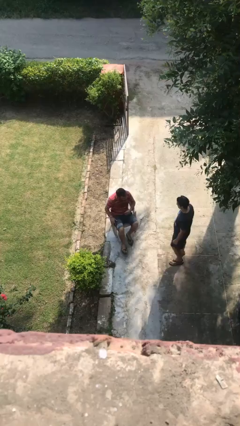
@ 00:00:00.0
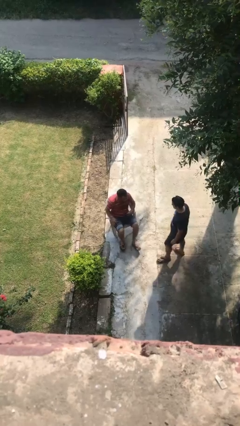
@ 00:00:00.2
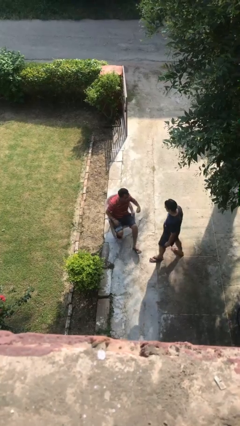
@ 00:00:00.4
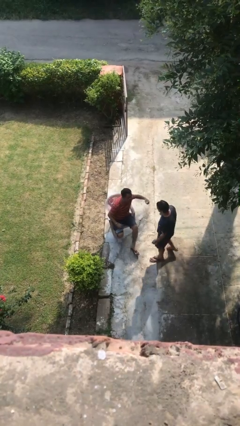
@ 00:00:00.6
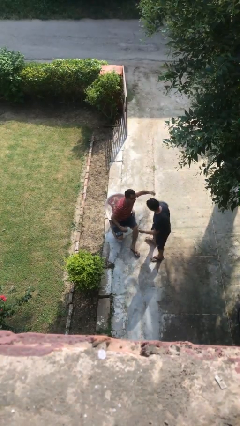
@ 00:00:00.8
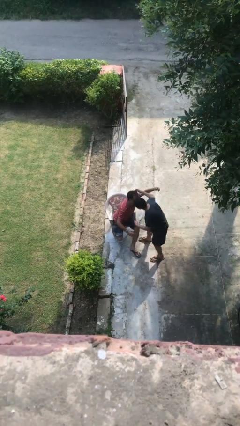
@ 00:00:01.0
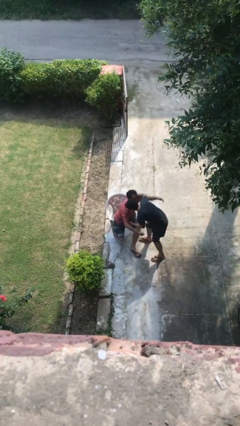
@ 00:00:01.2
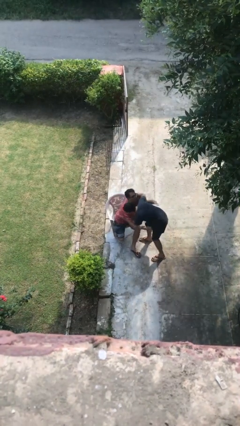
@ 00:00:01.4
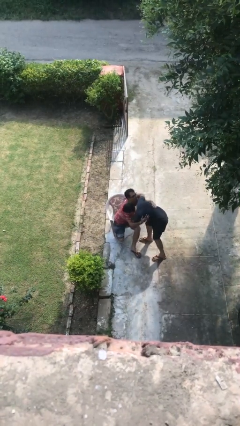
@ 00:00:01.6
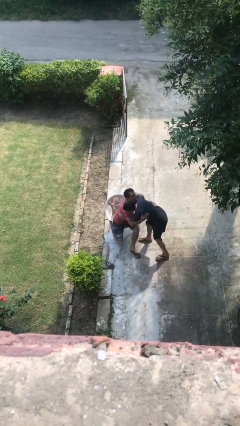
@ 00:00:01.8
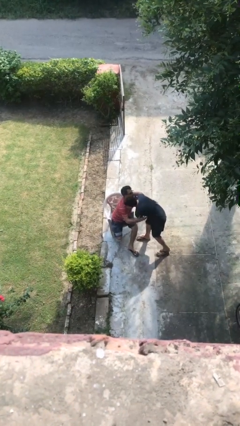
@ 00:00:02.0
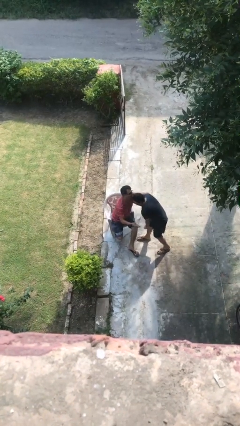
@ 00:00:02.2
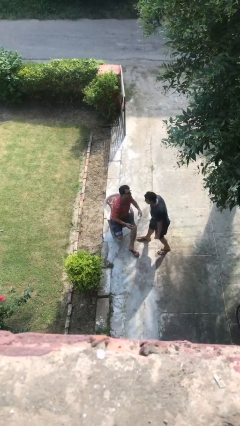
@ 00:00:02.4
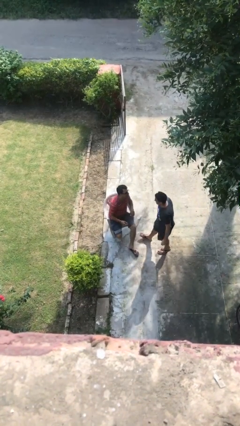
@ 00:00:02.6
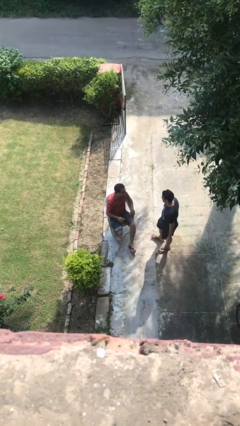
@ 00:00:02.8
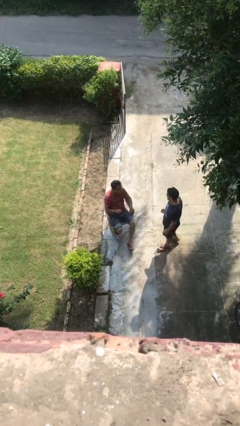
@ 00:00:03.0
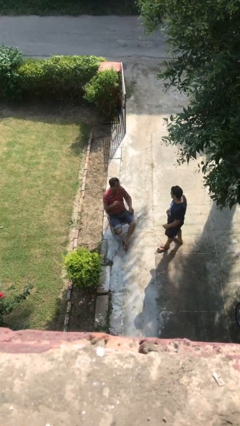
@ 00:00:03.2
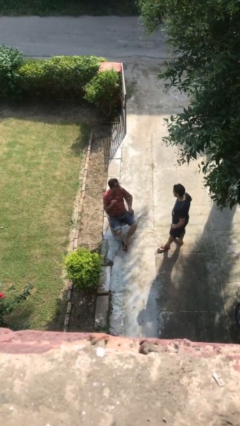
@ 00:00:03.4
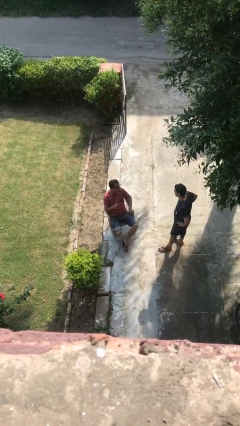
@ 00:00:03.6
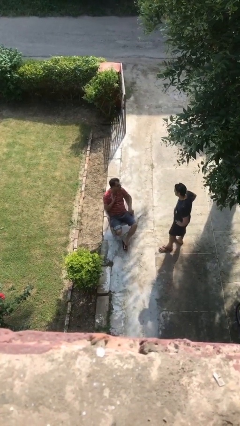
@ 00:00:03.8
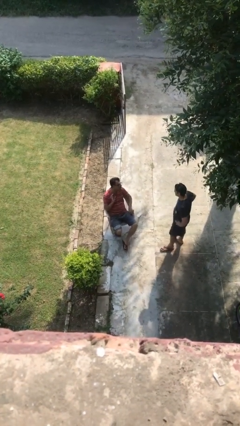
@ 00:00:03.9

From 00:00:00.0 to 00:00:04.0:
person embraces person

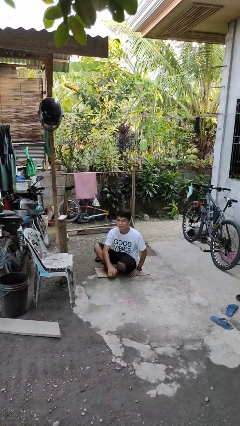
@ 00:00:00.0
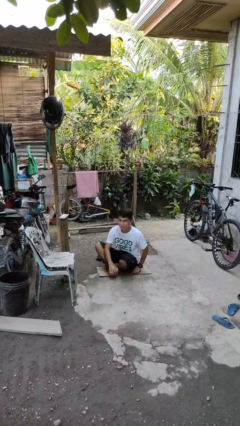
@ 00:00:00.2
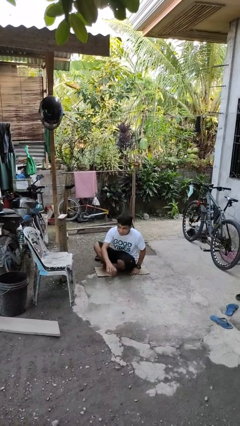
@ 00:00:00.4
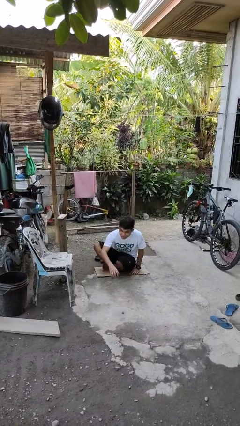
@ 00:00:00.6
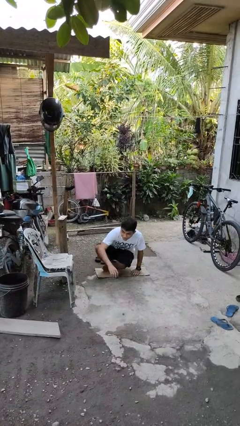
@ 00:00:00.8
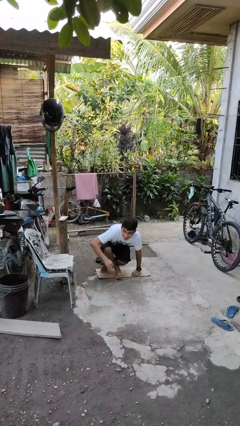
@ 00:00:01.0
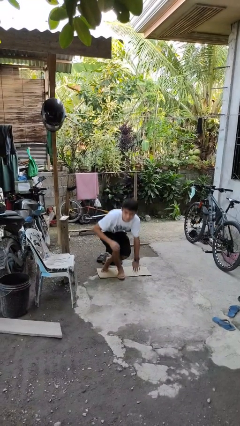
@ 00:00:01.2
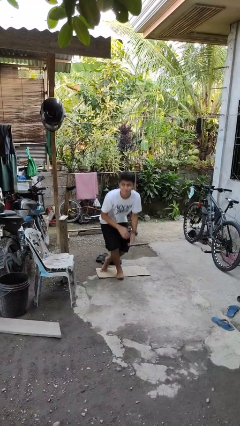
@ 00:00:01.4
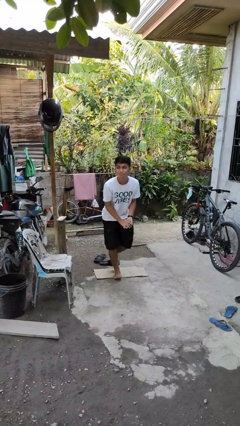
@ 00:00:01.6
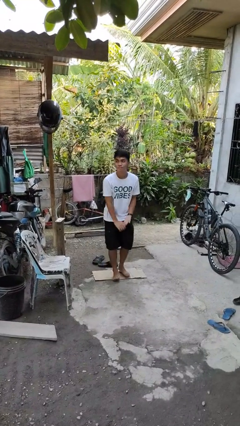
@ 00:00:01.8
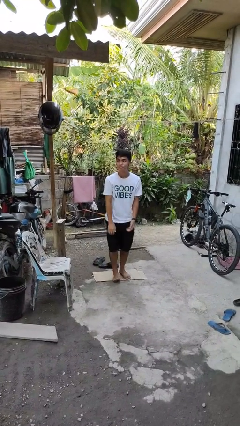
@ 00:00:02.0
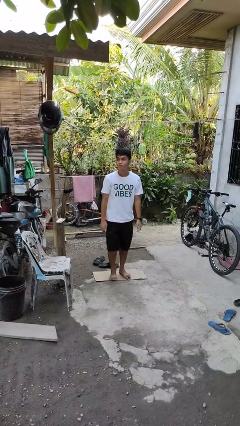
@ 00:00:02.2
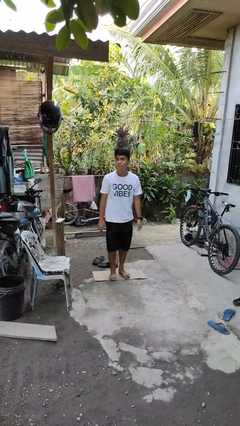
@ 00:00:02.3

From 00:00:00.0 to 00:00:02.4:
person stands up from floor

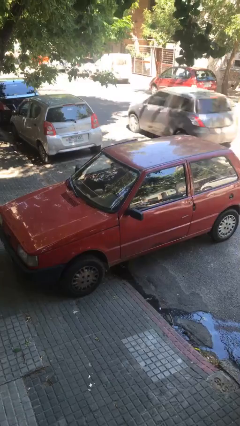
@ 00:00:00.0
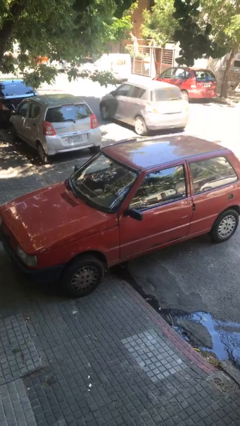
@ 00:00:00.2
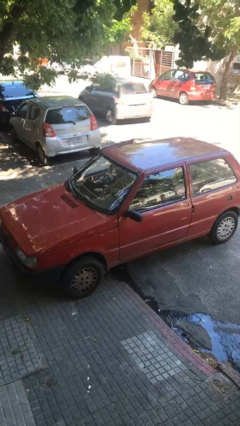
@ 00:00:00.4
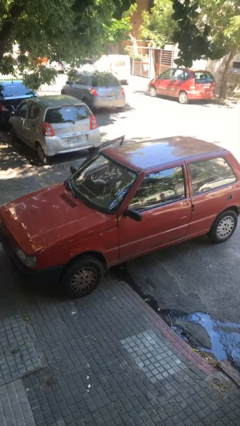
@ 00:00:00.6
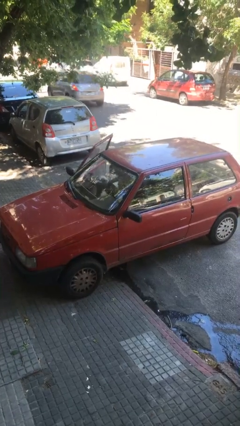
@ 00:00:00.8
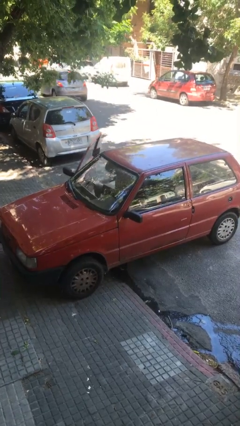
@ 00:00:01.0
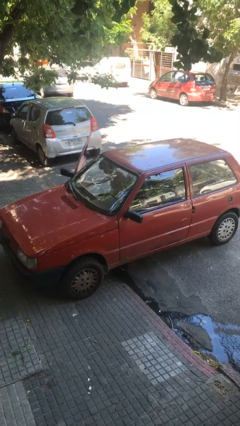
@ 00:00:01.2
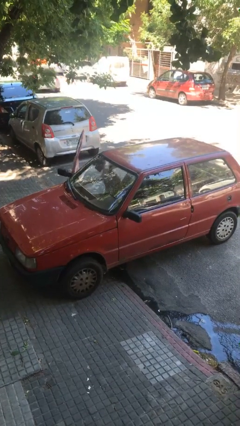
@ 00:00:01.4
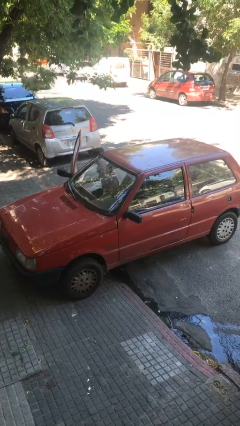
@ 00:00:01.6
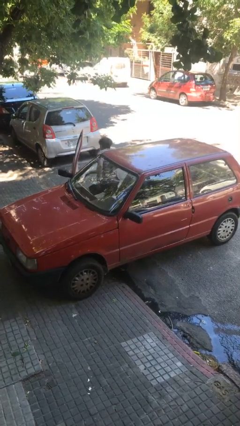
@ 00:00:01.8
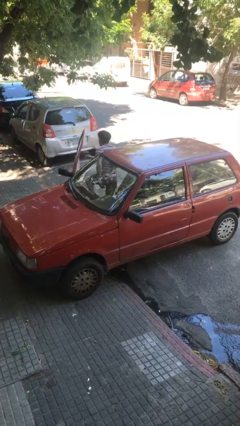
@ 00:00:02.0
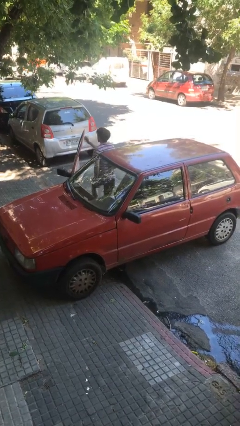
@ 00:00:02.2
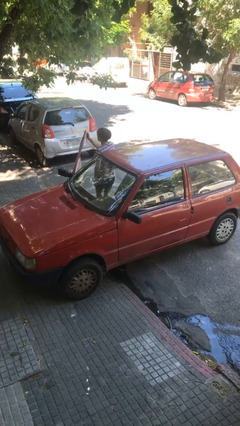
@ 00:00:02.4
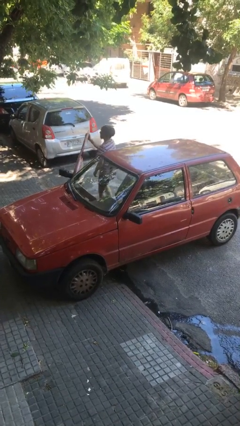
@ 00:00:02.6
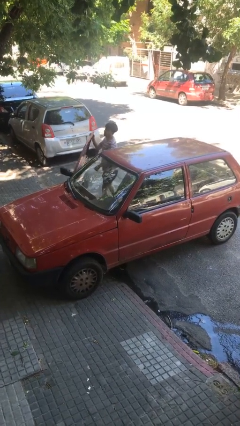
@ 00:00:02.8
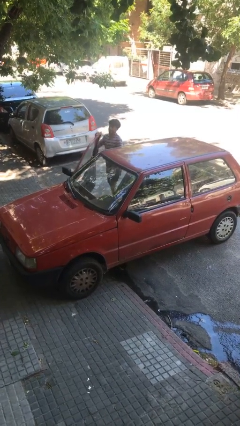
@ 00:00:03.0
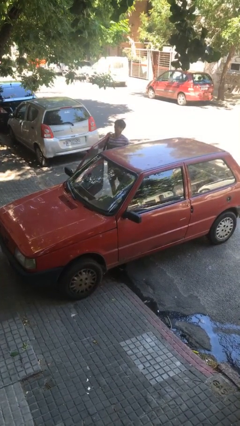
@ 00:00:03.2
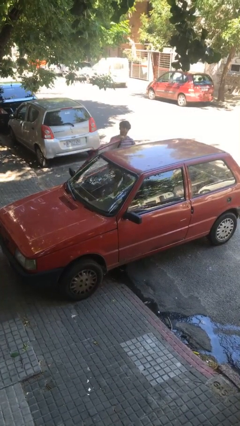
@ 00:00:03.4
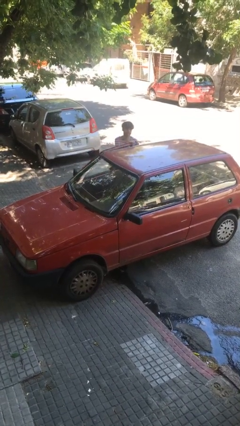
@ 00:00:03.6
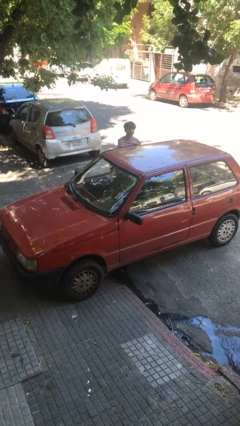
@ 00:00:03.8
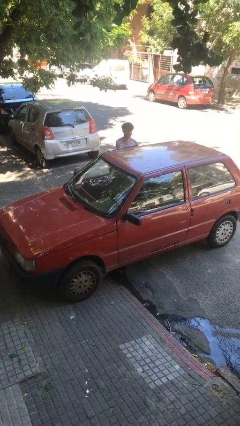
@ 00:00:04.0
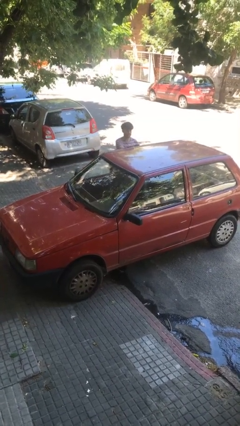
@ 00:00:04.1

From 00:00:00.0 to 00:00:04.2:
car drops off person

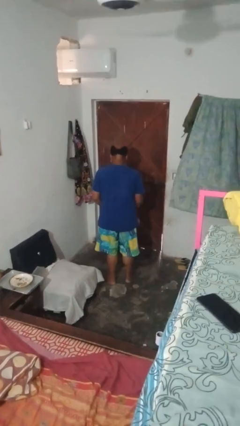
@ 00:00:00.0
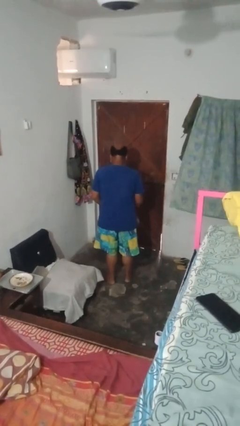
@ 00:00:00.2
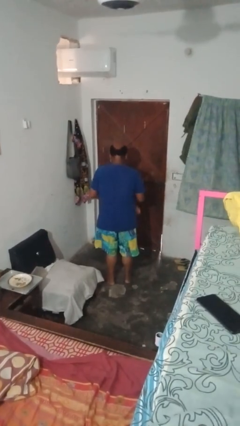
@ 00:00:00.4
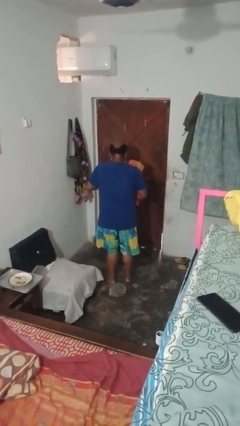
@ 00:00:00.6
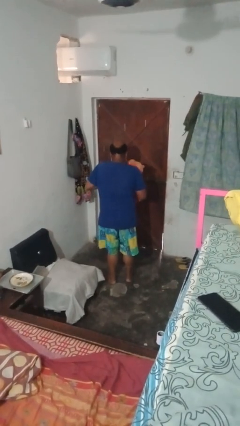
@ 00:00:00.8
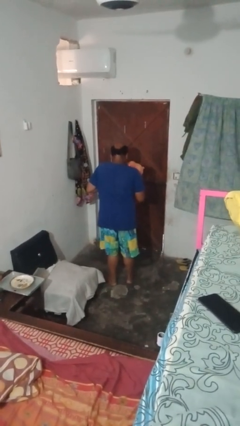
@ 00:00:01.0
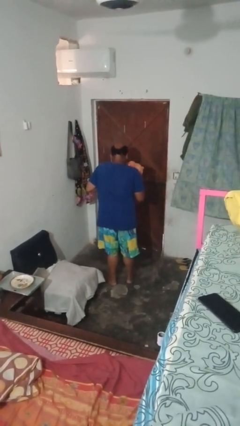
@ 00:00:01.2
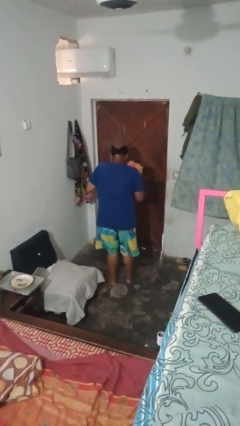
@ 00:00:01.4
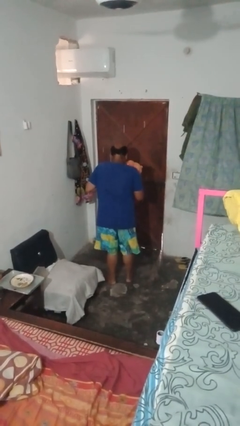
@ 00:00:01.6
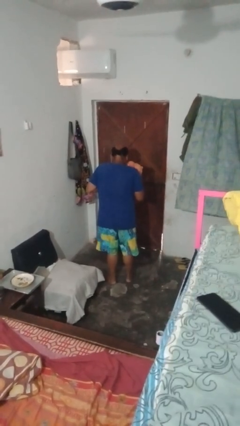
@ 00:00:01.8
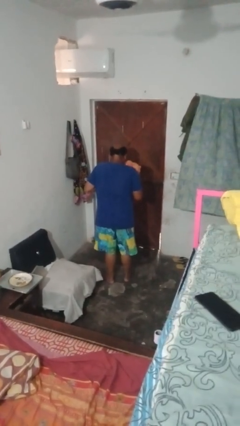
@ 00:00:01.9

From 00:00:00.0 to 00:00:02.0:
person hugs stuffed animal

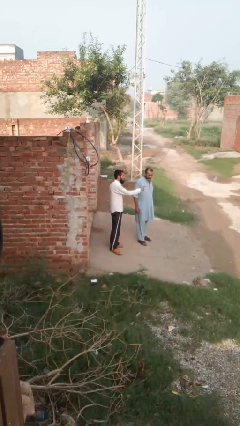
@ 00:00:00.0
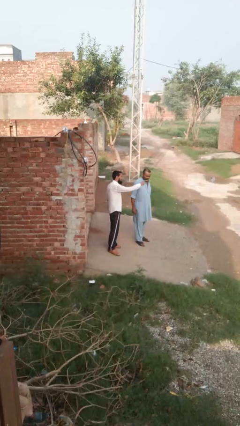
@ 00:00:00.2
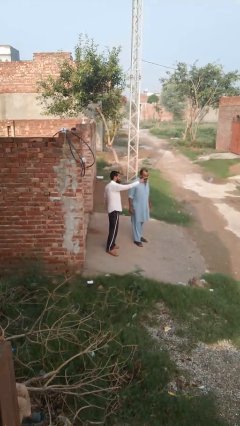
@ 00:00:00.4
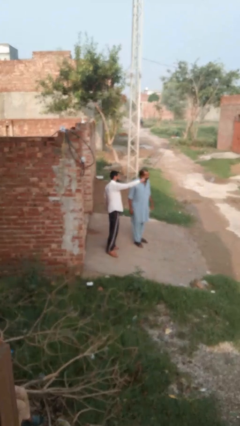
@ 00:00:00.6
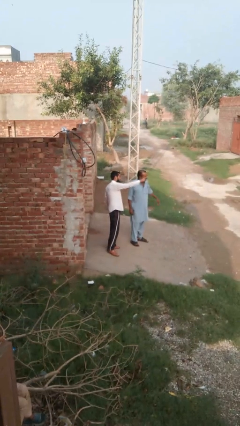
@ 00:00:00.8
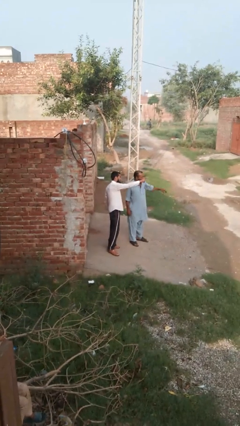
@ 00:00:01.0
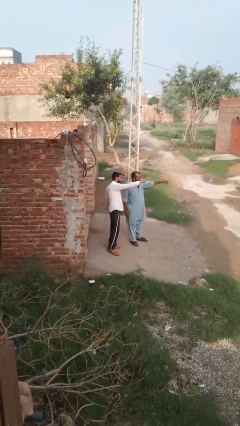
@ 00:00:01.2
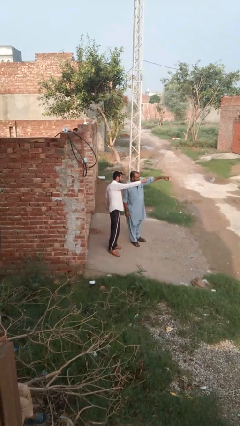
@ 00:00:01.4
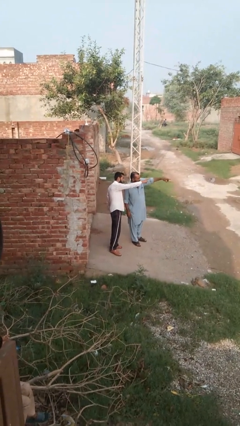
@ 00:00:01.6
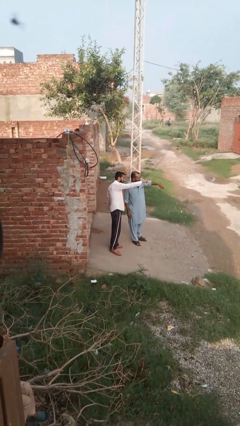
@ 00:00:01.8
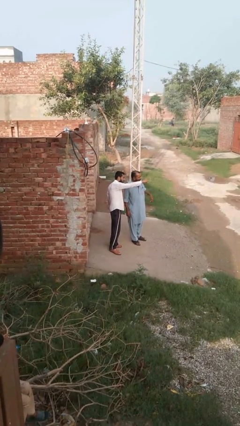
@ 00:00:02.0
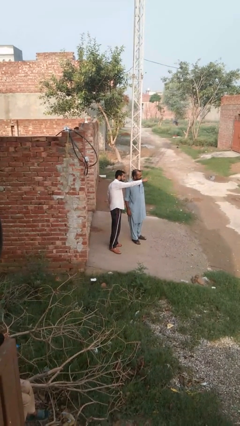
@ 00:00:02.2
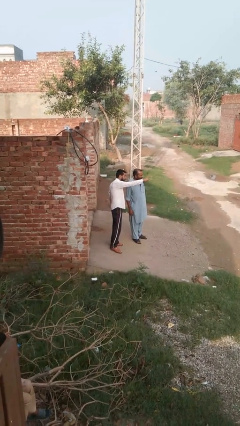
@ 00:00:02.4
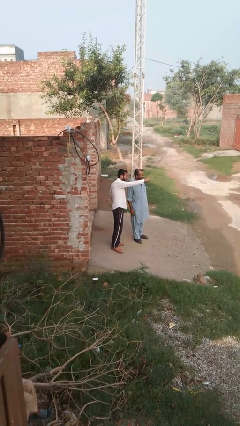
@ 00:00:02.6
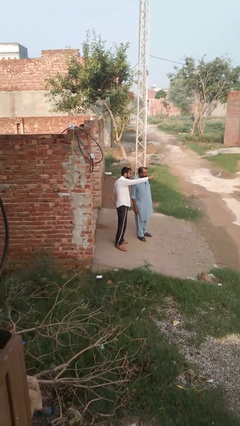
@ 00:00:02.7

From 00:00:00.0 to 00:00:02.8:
person points at person

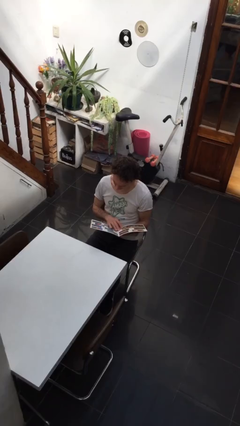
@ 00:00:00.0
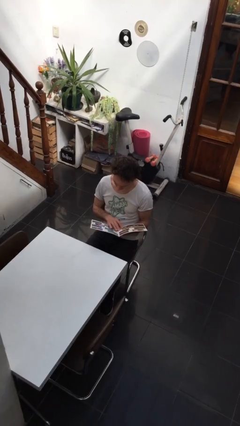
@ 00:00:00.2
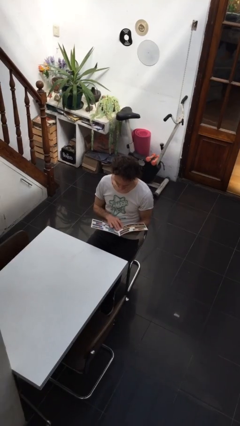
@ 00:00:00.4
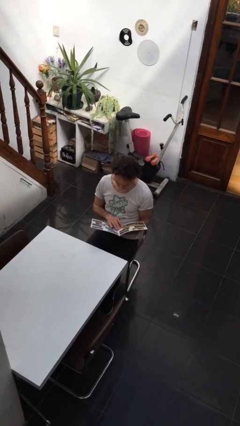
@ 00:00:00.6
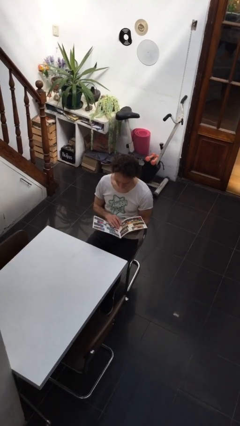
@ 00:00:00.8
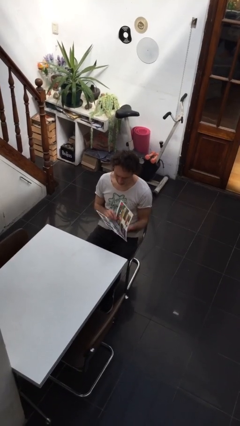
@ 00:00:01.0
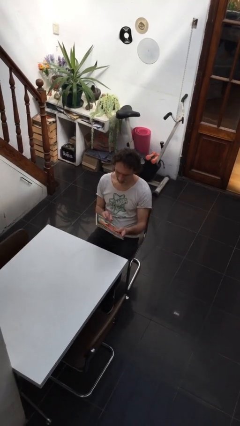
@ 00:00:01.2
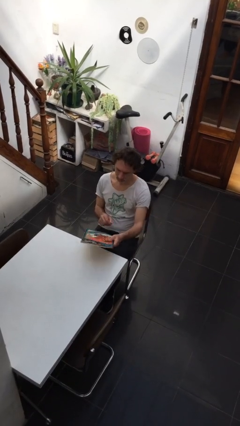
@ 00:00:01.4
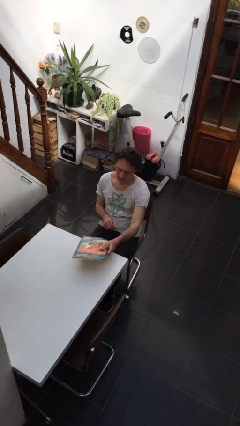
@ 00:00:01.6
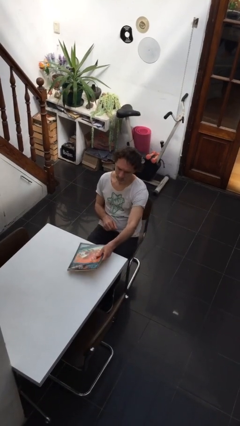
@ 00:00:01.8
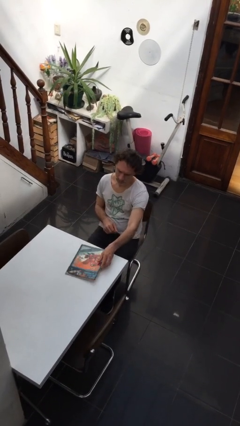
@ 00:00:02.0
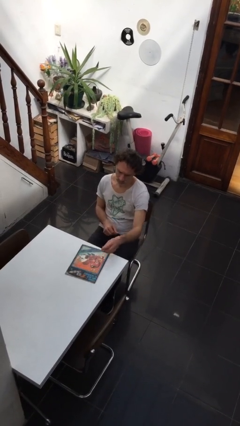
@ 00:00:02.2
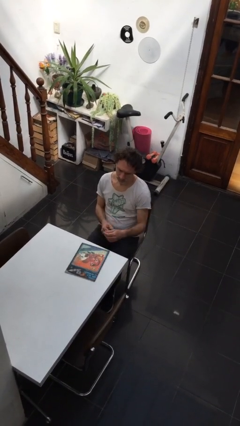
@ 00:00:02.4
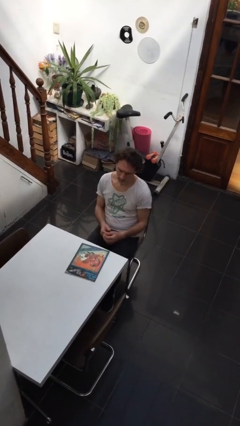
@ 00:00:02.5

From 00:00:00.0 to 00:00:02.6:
person puts down object on table
